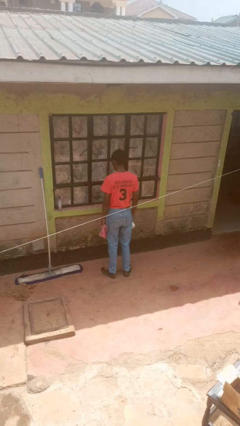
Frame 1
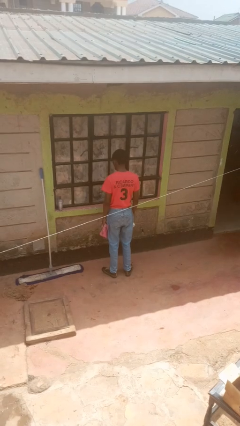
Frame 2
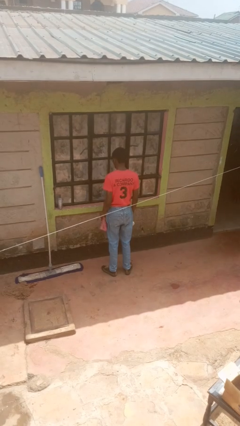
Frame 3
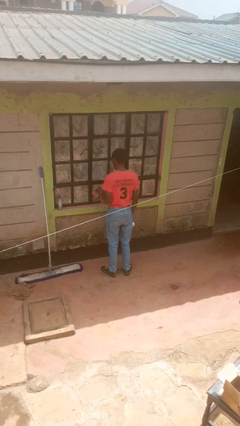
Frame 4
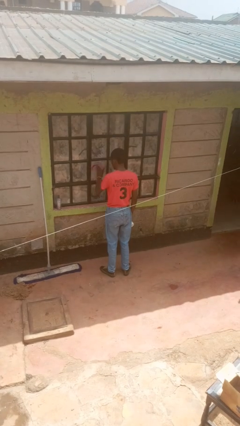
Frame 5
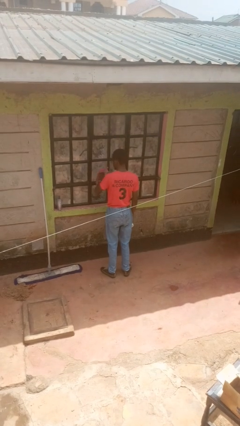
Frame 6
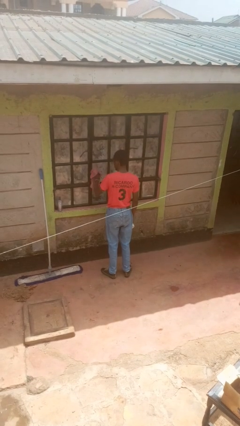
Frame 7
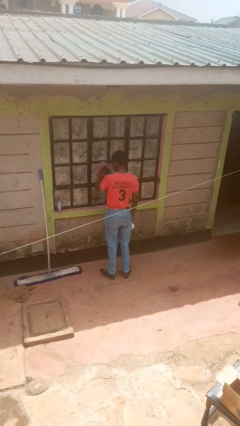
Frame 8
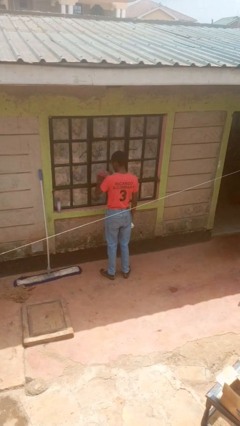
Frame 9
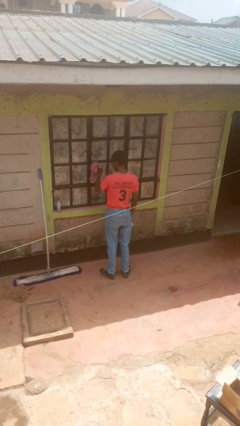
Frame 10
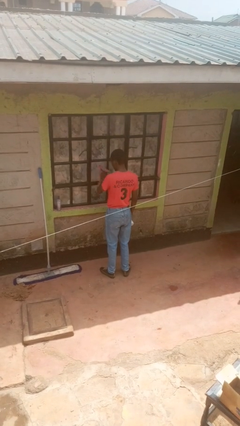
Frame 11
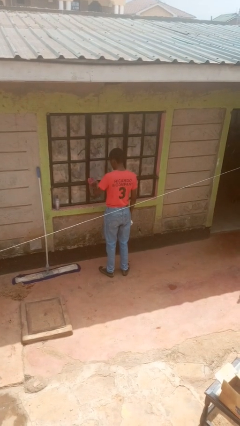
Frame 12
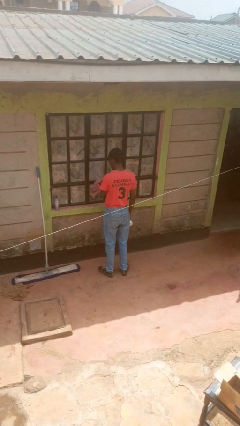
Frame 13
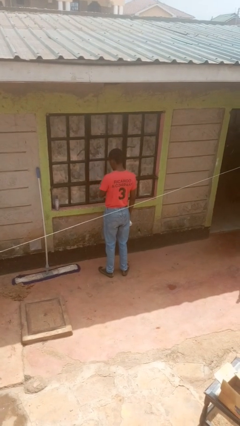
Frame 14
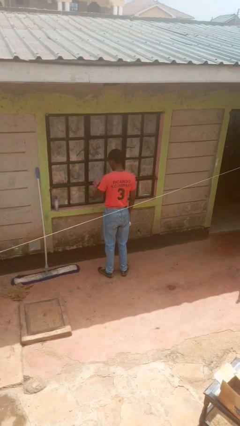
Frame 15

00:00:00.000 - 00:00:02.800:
person washes window

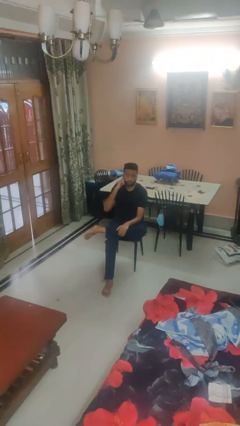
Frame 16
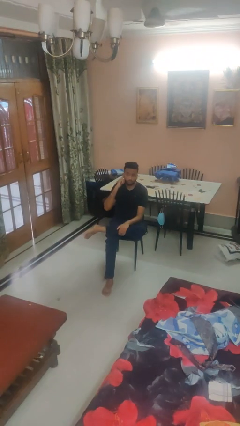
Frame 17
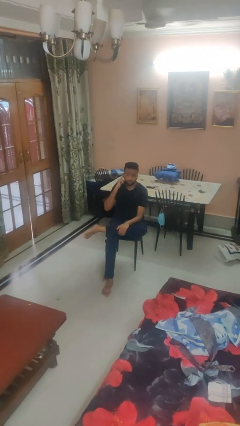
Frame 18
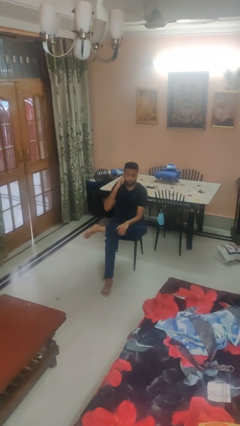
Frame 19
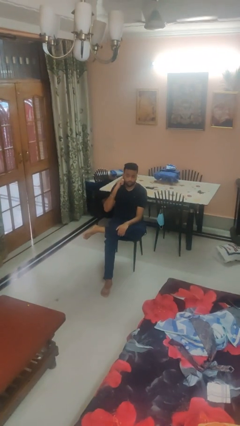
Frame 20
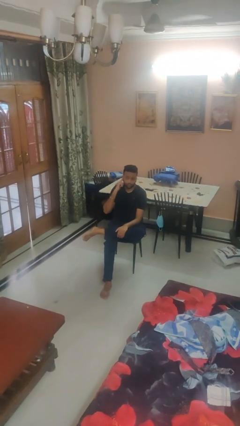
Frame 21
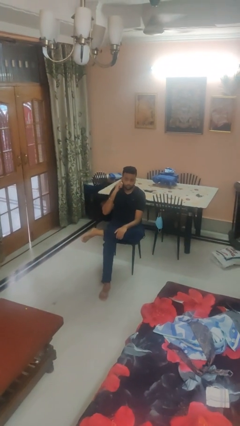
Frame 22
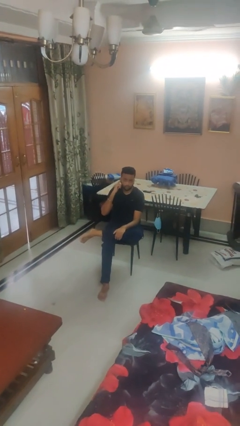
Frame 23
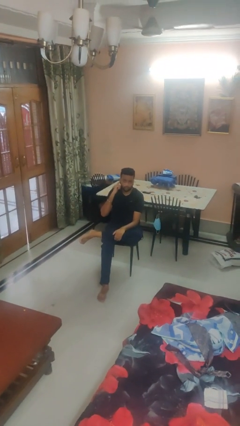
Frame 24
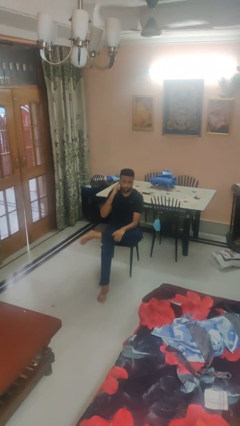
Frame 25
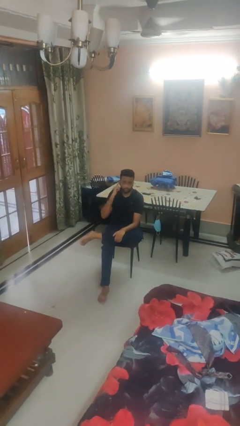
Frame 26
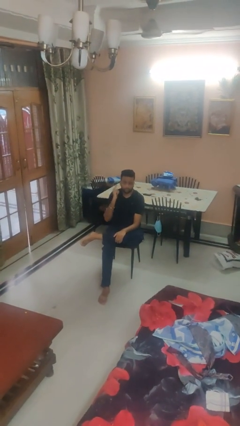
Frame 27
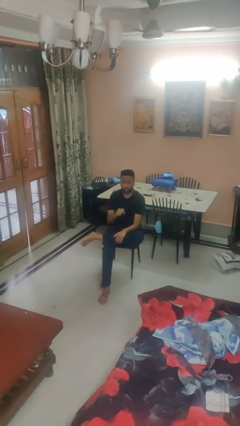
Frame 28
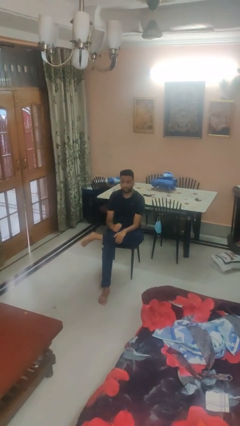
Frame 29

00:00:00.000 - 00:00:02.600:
person gestures listen closely

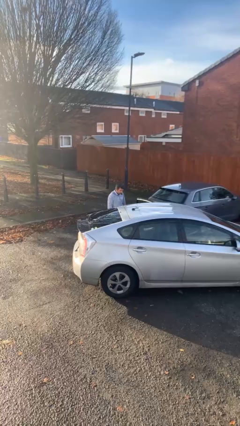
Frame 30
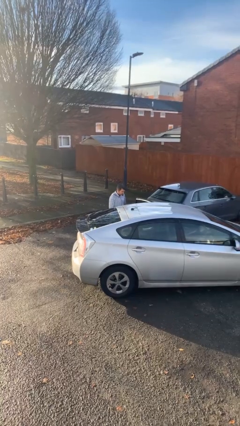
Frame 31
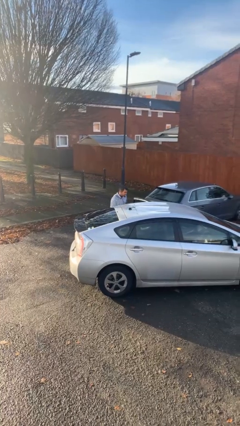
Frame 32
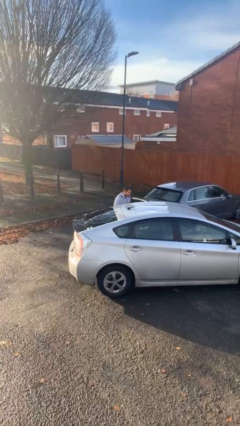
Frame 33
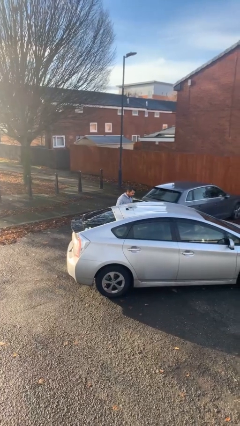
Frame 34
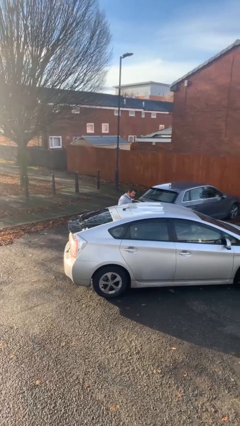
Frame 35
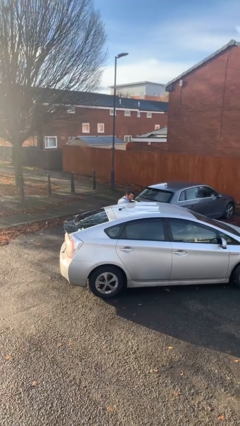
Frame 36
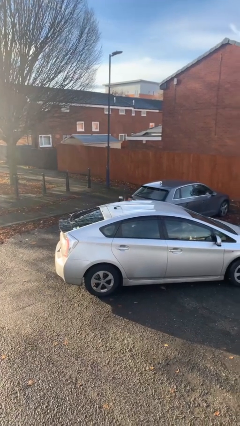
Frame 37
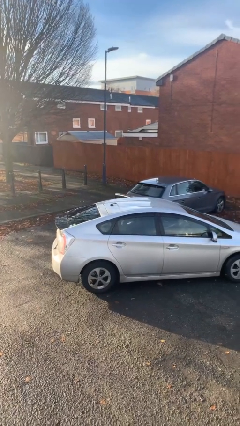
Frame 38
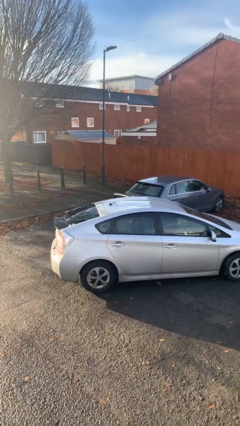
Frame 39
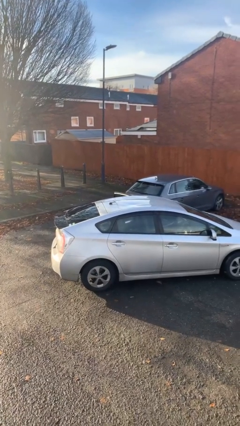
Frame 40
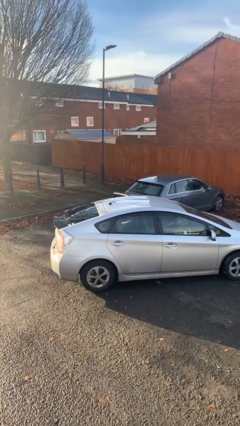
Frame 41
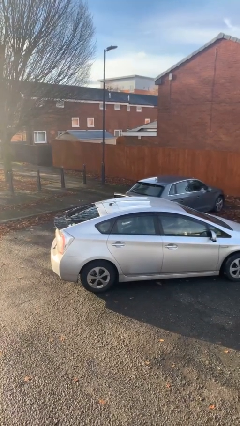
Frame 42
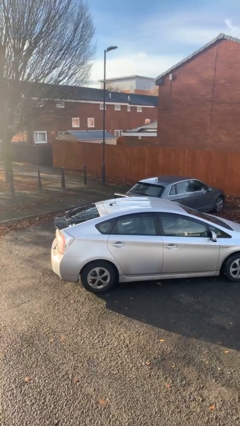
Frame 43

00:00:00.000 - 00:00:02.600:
person enters car

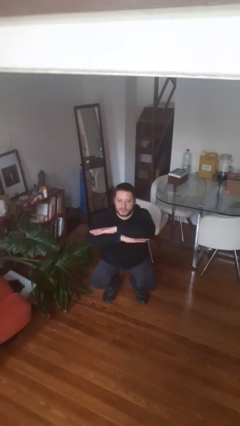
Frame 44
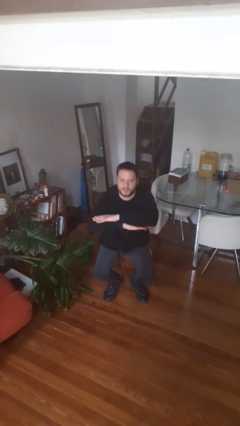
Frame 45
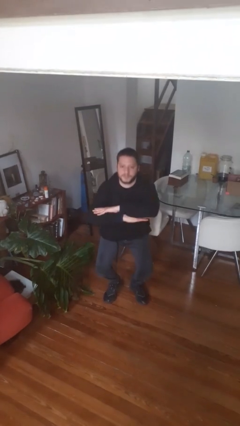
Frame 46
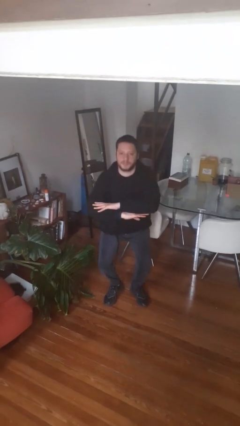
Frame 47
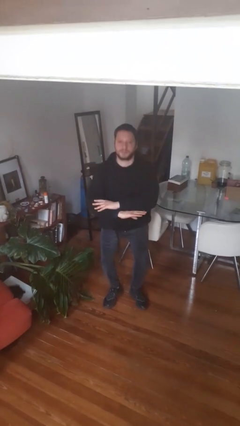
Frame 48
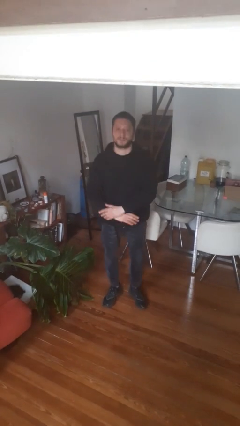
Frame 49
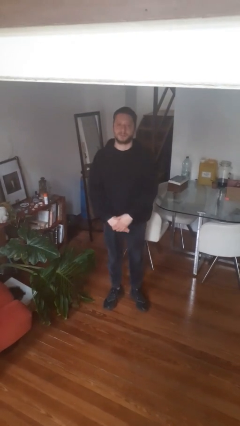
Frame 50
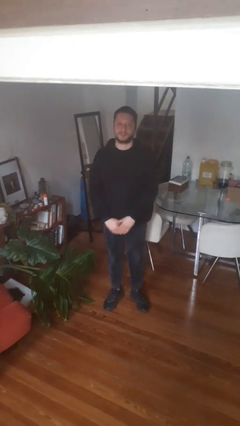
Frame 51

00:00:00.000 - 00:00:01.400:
person stands up

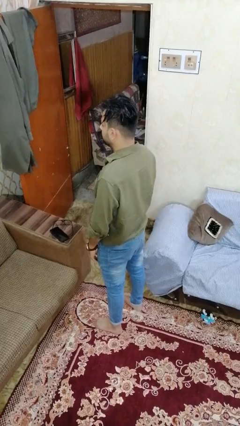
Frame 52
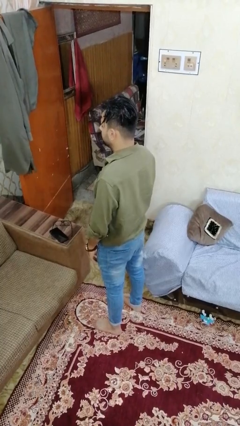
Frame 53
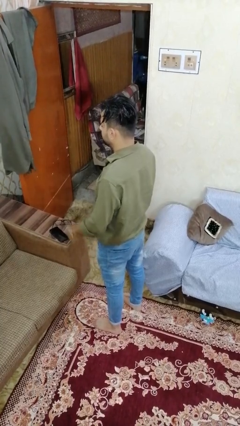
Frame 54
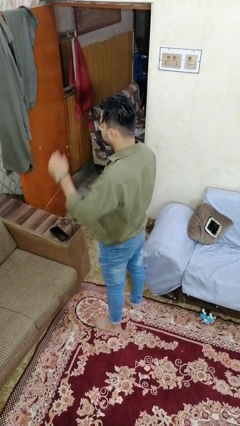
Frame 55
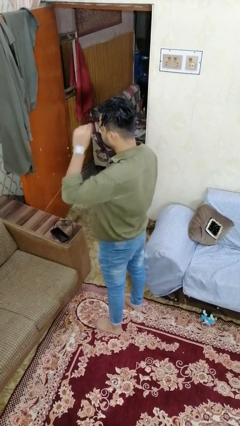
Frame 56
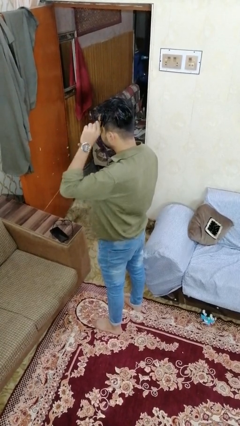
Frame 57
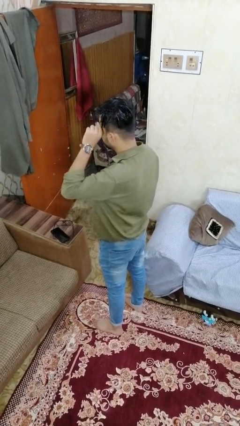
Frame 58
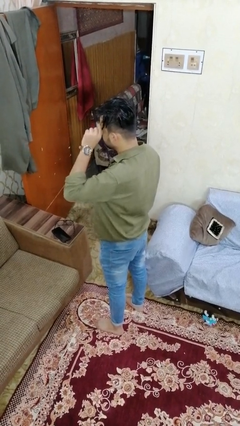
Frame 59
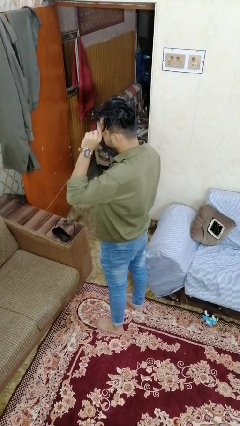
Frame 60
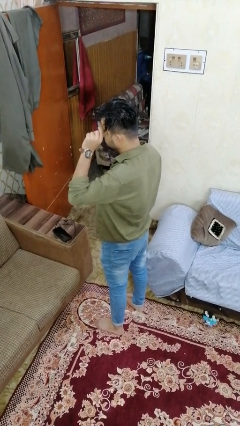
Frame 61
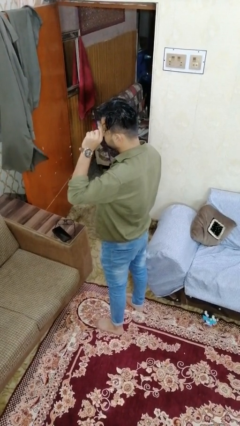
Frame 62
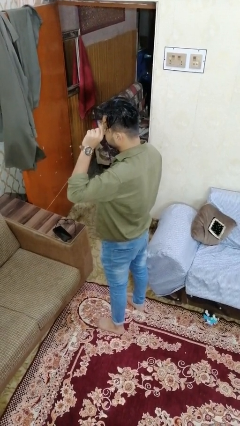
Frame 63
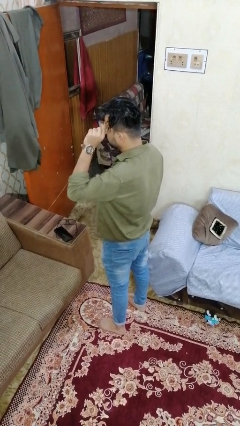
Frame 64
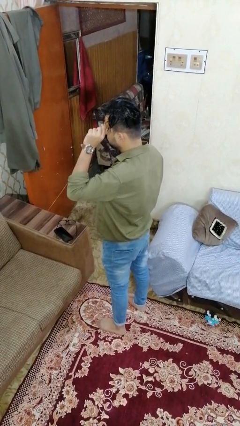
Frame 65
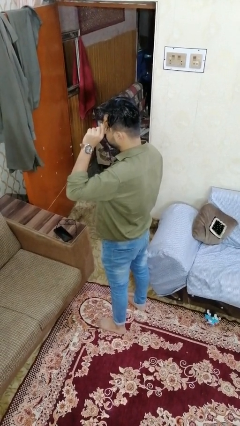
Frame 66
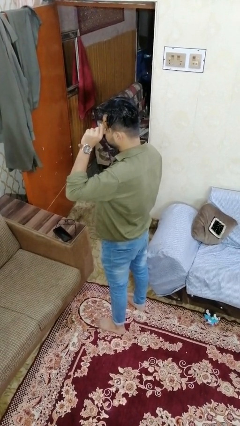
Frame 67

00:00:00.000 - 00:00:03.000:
person scratches face

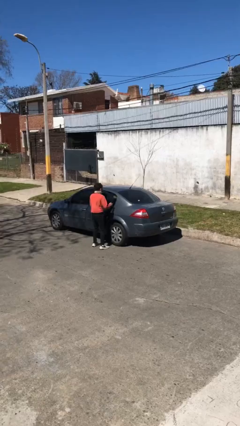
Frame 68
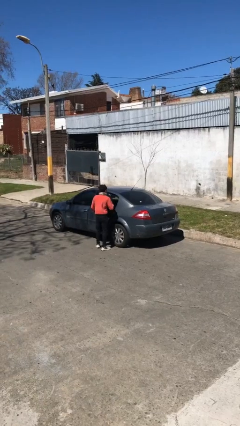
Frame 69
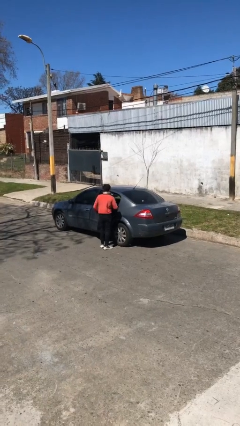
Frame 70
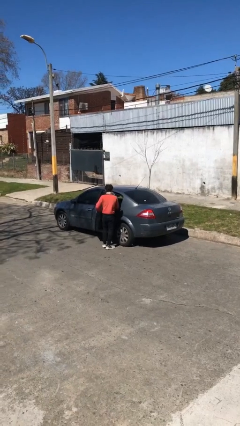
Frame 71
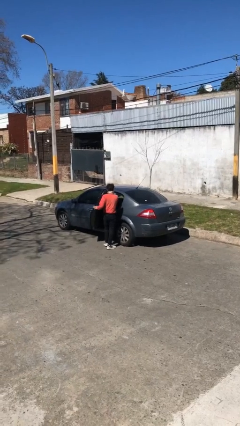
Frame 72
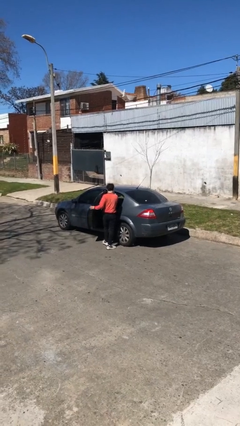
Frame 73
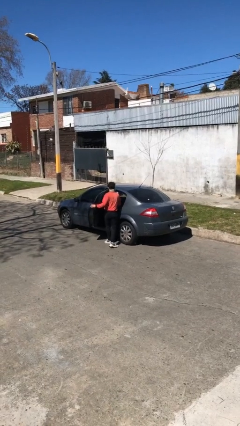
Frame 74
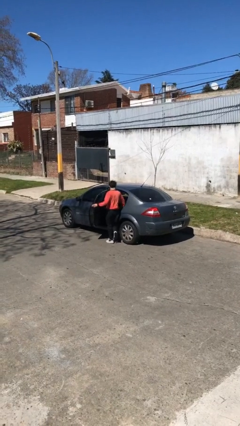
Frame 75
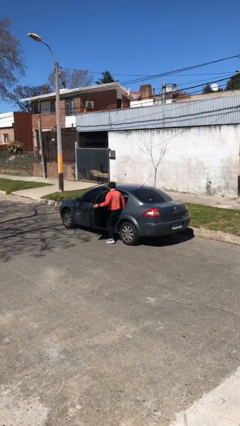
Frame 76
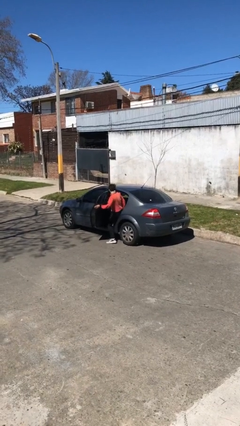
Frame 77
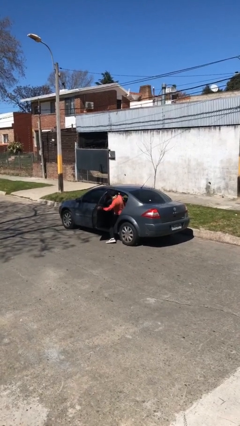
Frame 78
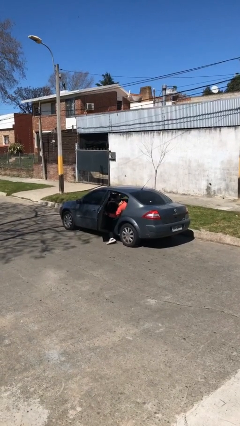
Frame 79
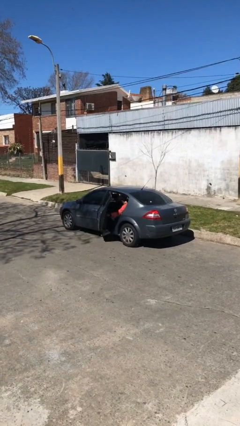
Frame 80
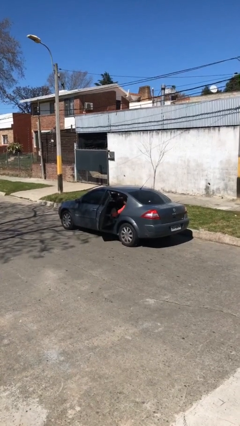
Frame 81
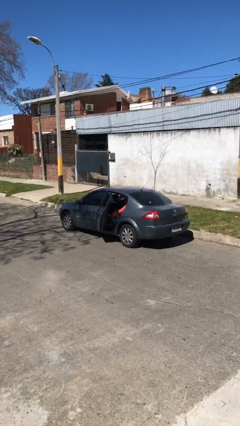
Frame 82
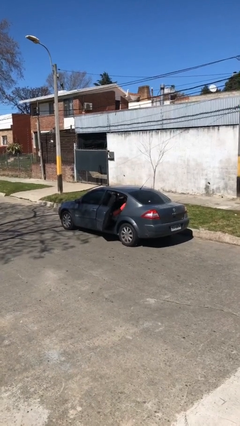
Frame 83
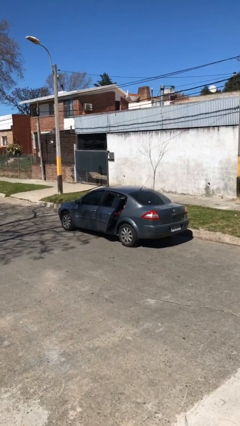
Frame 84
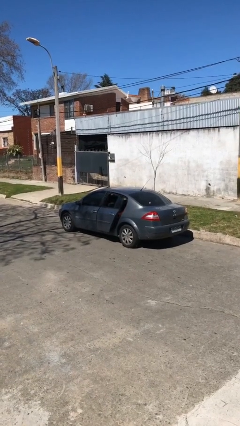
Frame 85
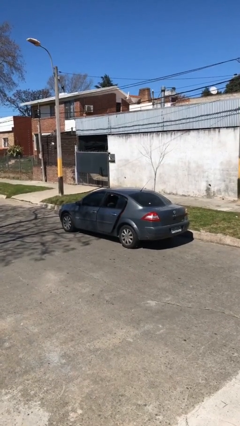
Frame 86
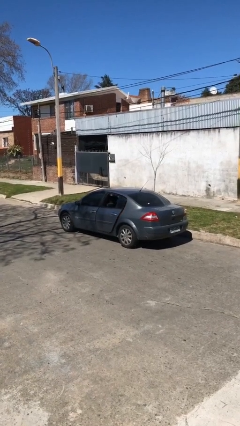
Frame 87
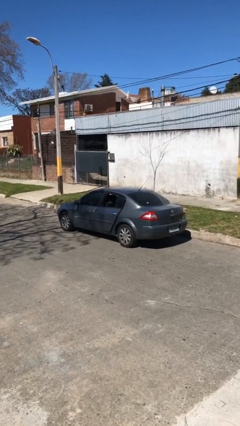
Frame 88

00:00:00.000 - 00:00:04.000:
car picks up person

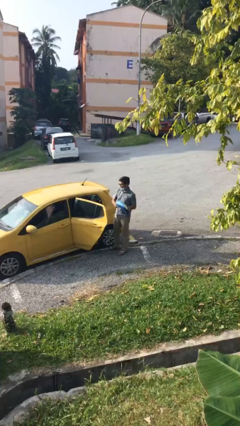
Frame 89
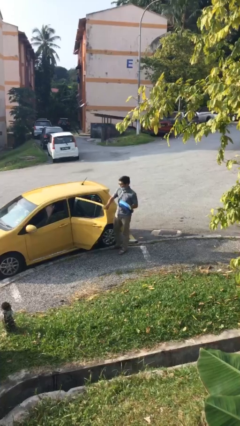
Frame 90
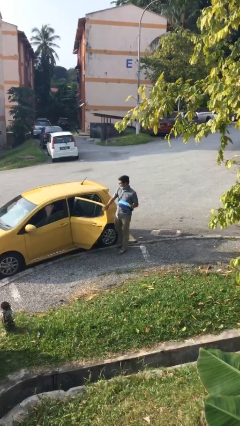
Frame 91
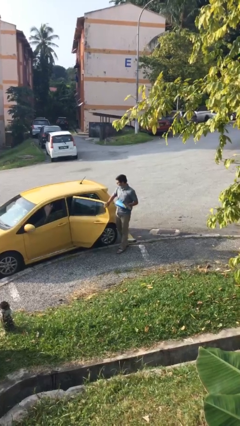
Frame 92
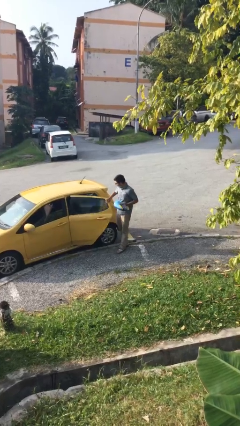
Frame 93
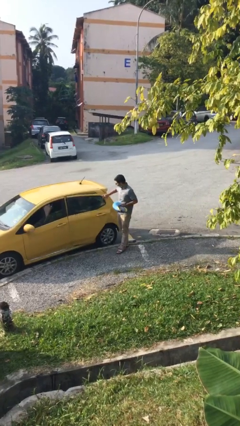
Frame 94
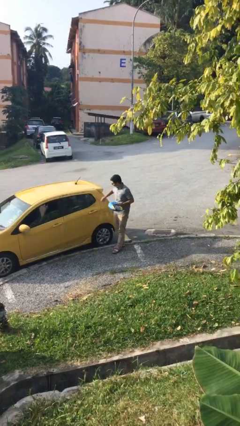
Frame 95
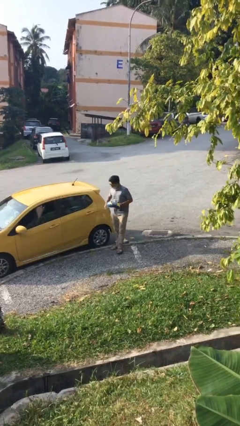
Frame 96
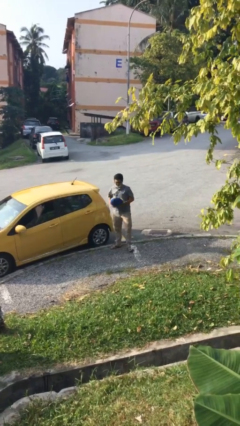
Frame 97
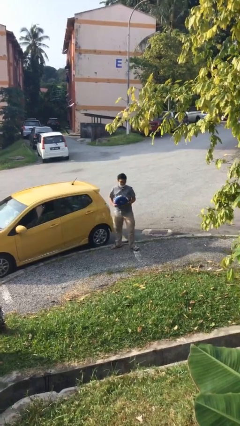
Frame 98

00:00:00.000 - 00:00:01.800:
person closes car door
